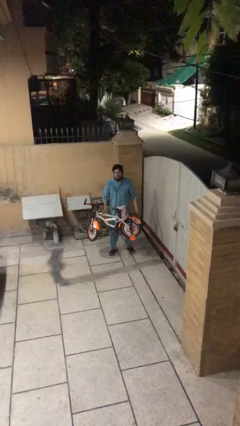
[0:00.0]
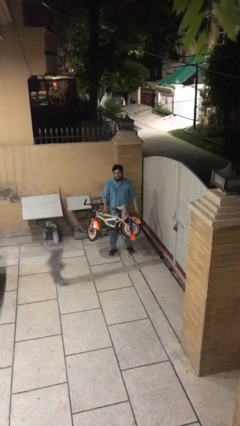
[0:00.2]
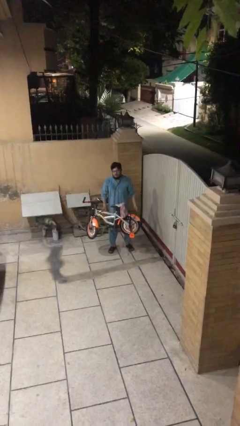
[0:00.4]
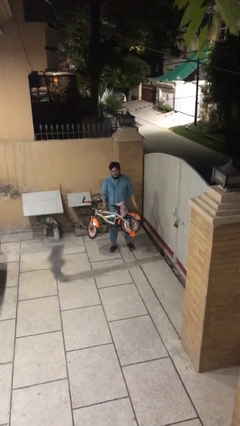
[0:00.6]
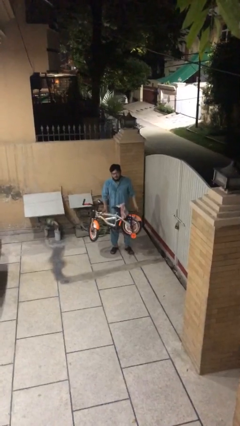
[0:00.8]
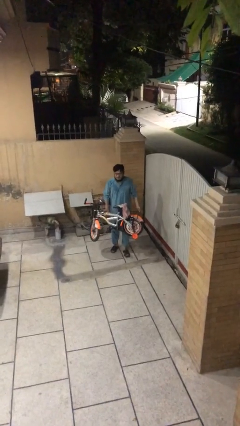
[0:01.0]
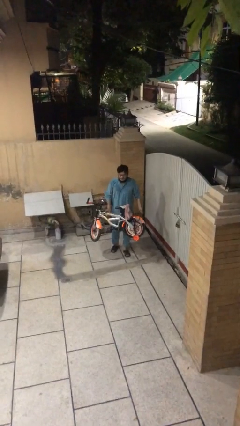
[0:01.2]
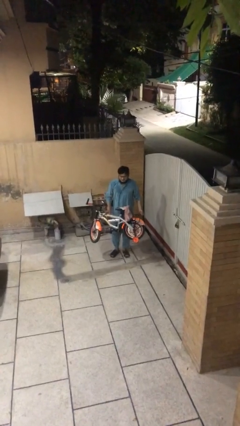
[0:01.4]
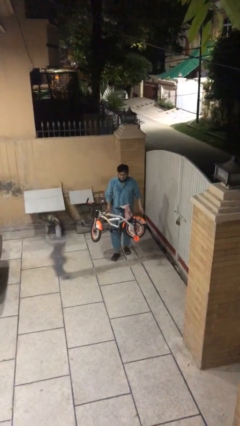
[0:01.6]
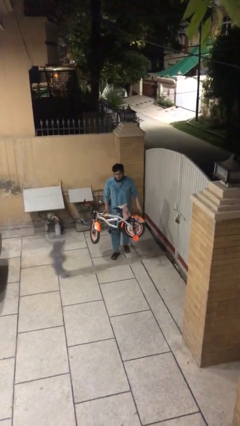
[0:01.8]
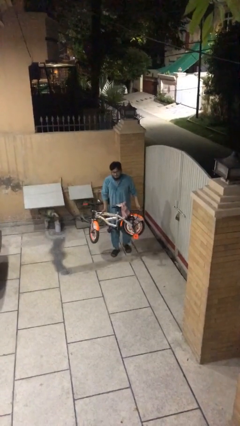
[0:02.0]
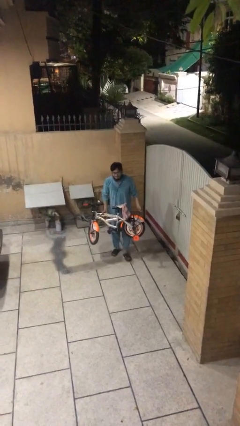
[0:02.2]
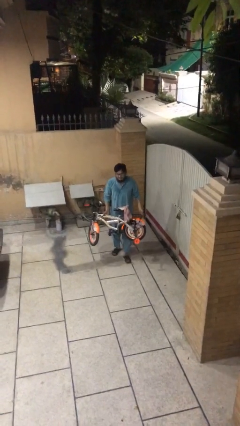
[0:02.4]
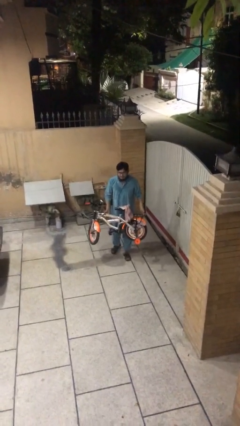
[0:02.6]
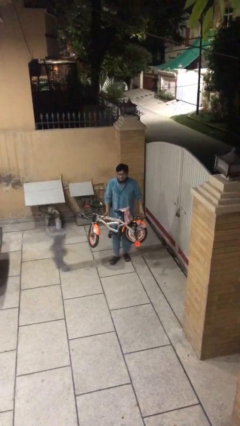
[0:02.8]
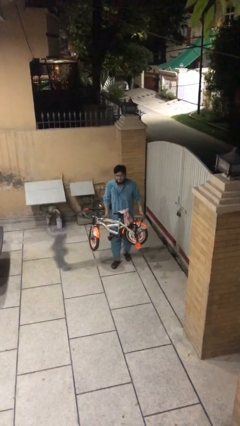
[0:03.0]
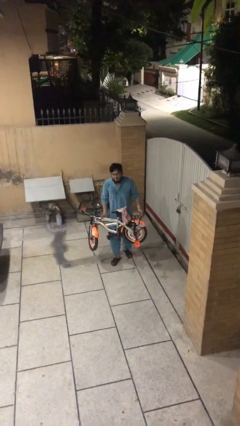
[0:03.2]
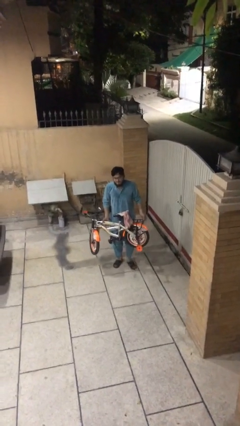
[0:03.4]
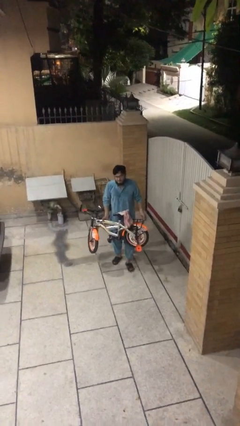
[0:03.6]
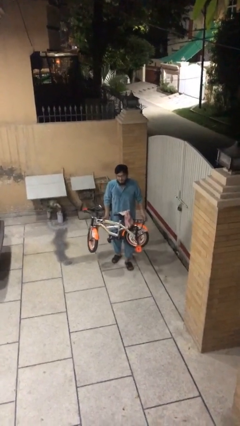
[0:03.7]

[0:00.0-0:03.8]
person carries heavy object

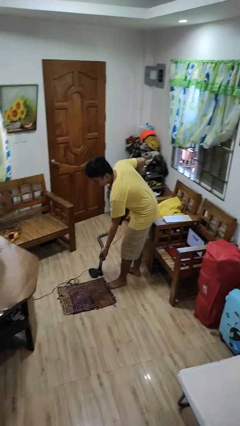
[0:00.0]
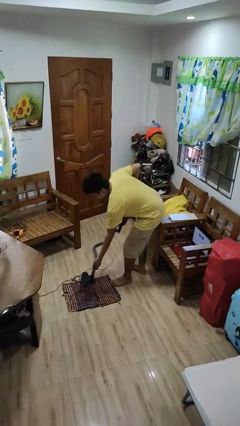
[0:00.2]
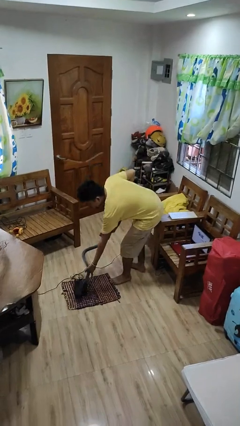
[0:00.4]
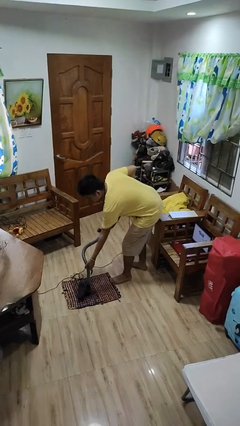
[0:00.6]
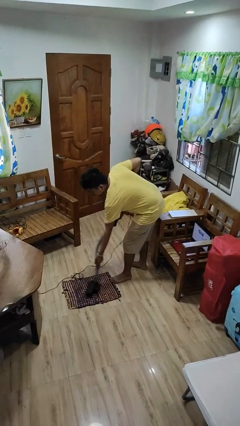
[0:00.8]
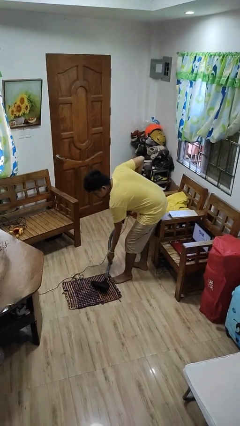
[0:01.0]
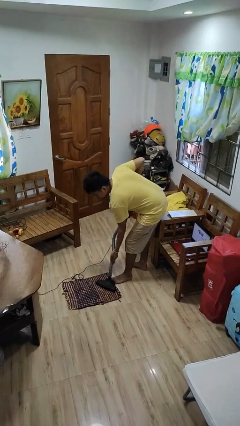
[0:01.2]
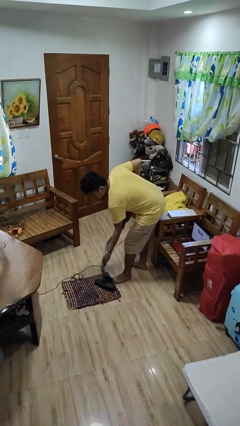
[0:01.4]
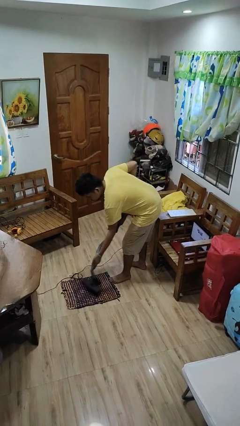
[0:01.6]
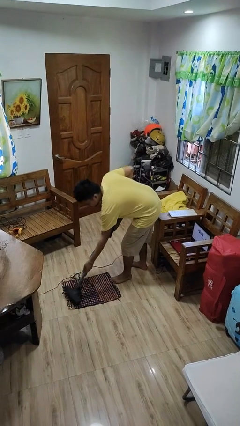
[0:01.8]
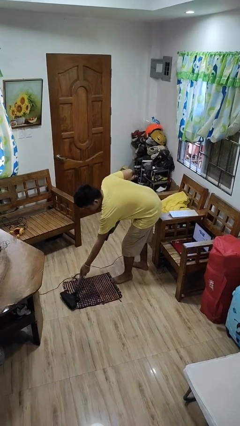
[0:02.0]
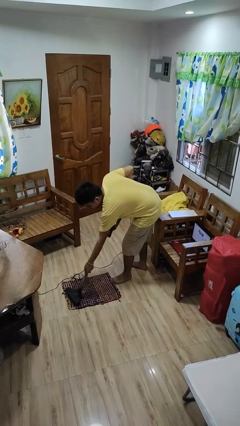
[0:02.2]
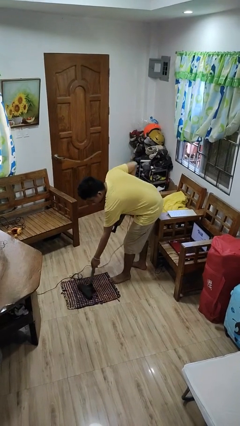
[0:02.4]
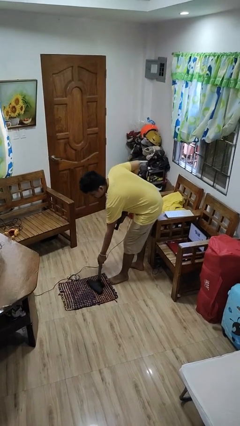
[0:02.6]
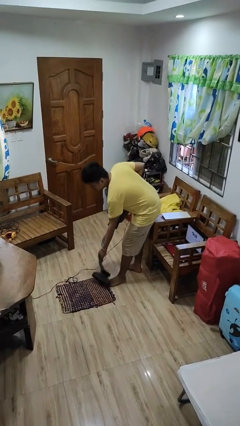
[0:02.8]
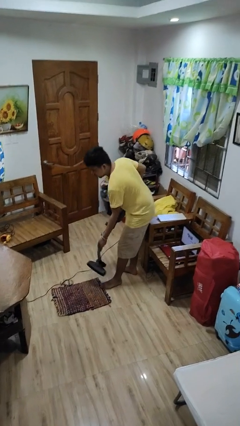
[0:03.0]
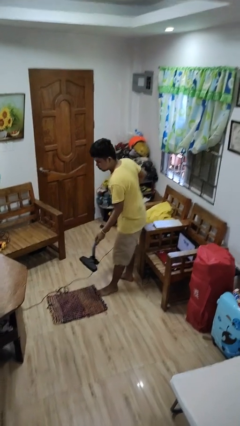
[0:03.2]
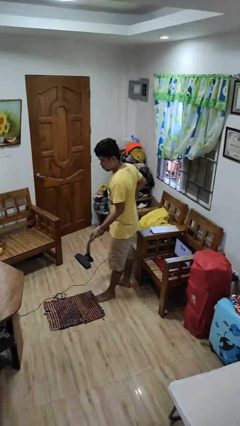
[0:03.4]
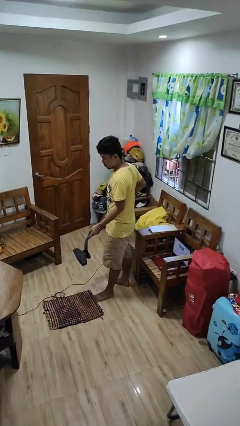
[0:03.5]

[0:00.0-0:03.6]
person vacuums carpet

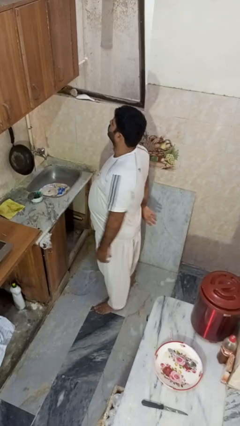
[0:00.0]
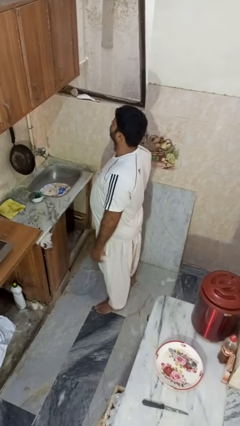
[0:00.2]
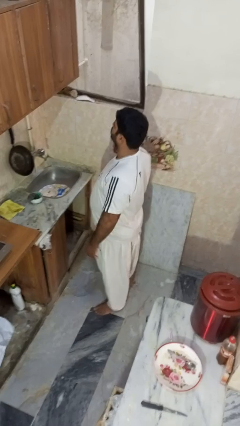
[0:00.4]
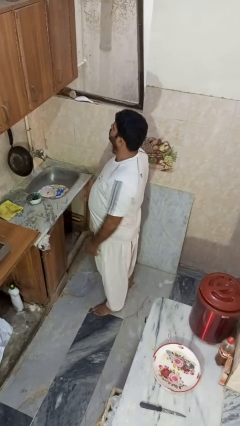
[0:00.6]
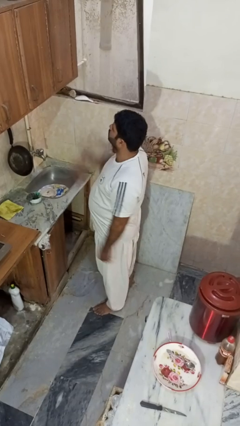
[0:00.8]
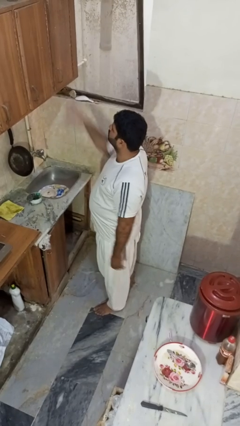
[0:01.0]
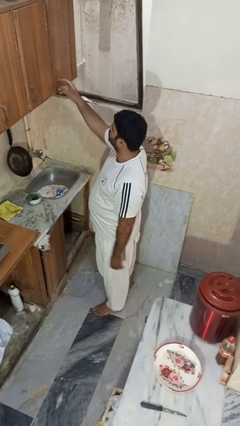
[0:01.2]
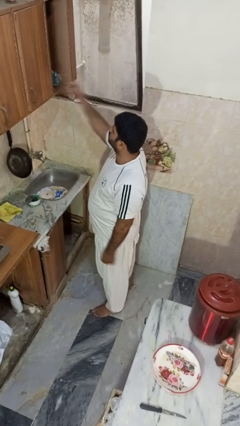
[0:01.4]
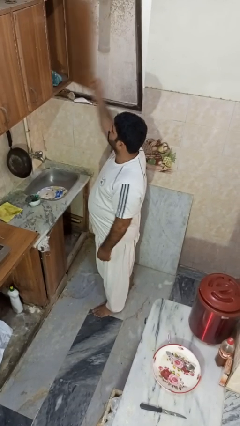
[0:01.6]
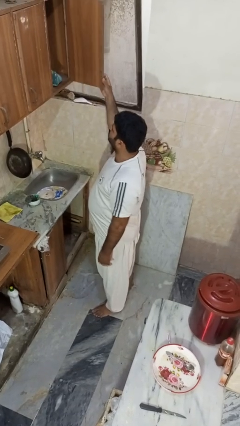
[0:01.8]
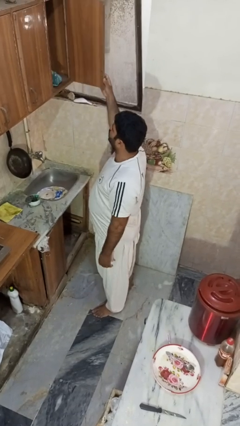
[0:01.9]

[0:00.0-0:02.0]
person opens cabinet

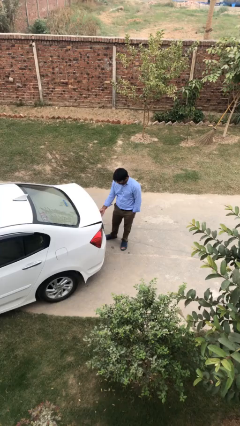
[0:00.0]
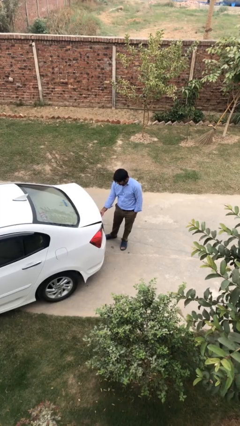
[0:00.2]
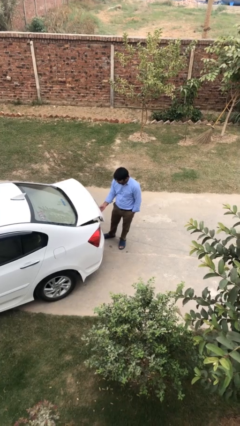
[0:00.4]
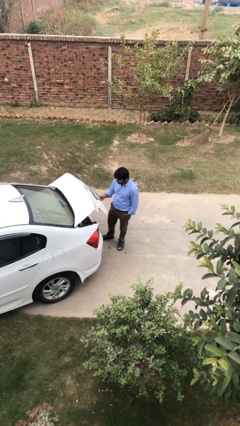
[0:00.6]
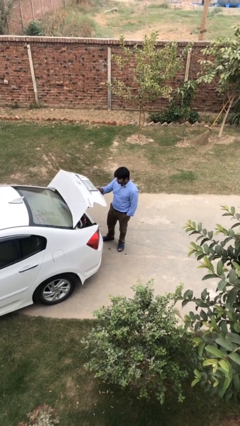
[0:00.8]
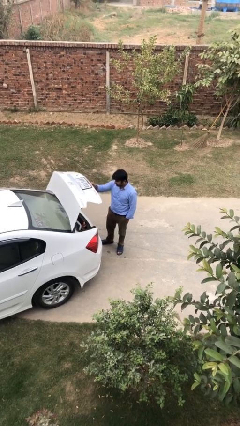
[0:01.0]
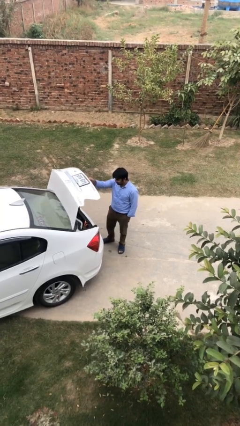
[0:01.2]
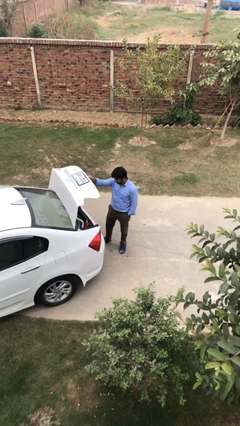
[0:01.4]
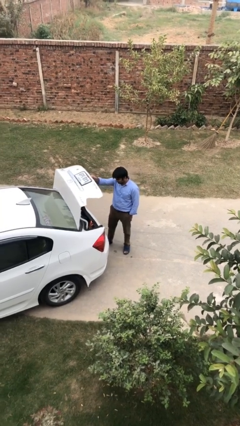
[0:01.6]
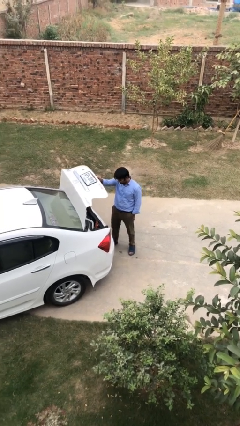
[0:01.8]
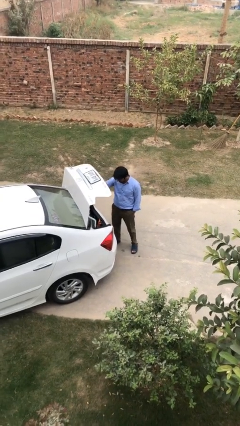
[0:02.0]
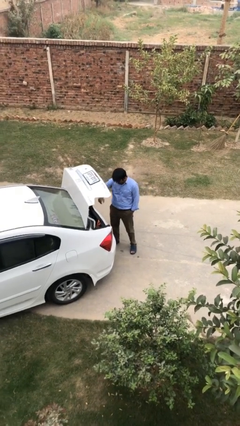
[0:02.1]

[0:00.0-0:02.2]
person opens car trunk

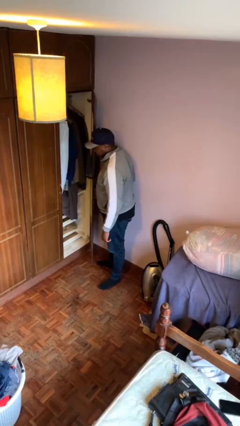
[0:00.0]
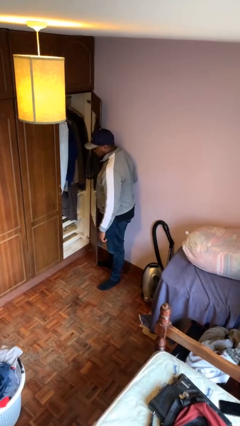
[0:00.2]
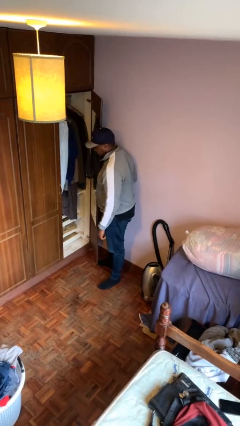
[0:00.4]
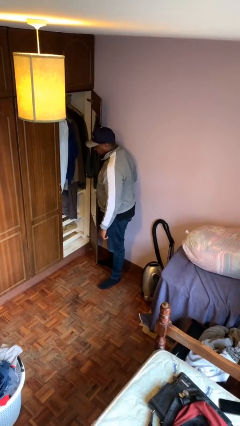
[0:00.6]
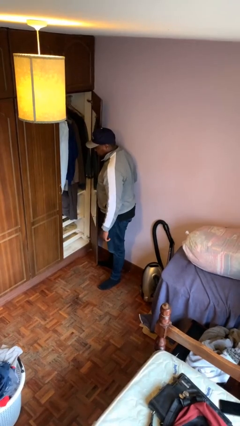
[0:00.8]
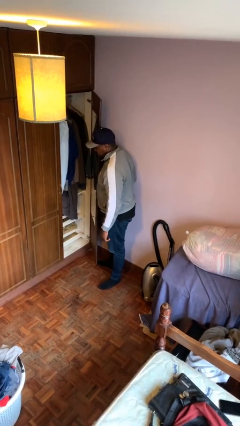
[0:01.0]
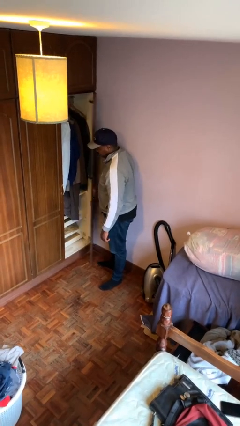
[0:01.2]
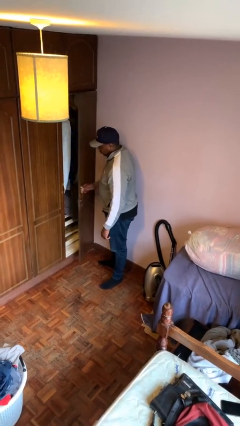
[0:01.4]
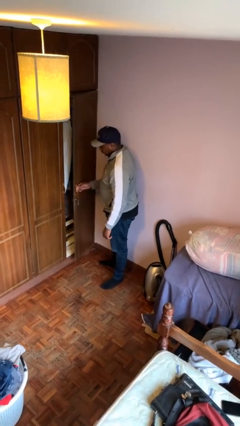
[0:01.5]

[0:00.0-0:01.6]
person opens closet door

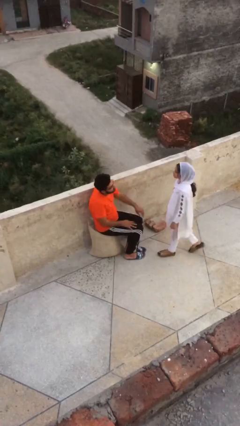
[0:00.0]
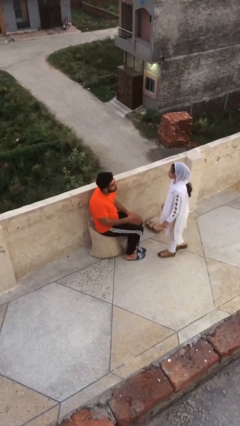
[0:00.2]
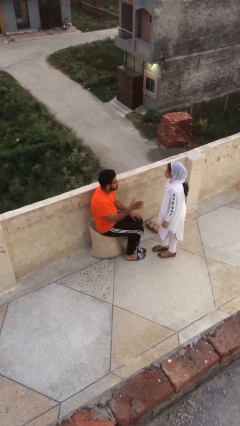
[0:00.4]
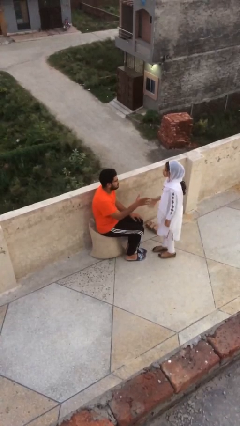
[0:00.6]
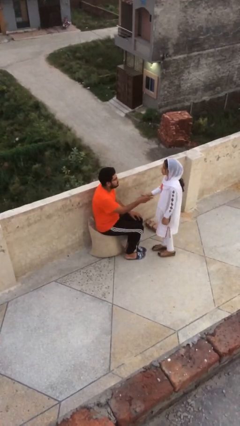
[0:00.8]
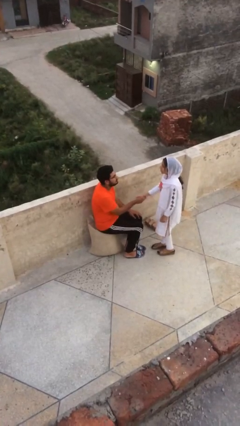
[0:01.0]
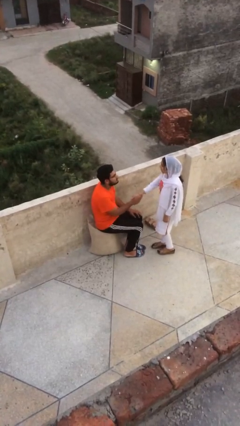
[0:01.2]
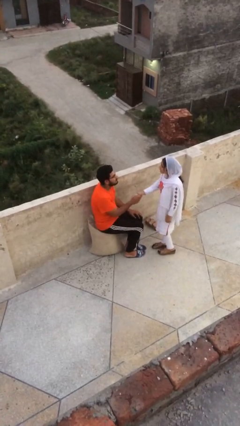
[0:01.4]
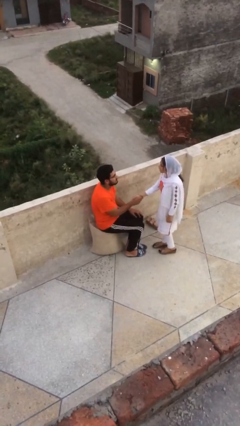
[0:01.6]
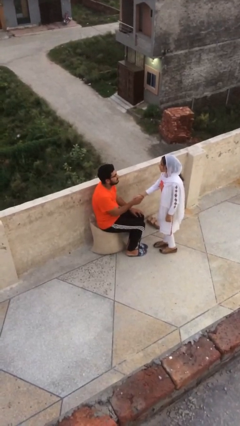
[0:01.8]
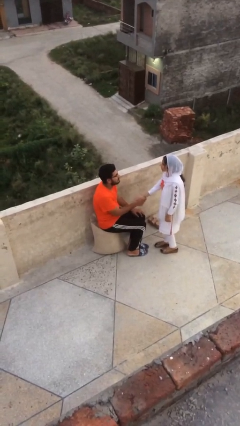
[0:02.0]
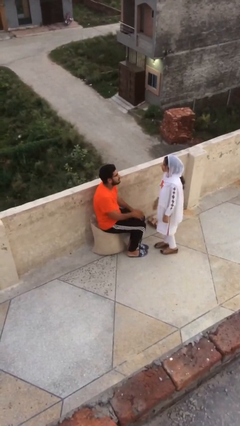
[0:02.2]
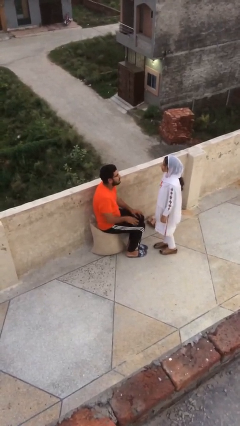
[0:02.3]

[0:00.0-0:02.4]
person shakes hand

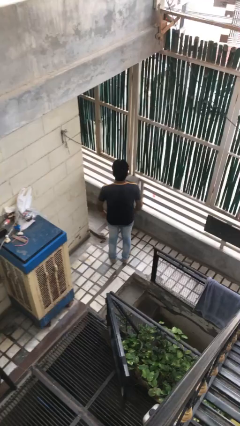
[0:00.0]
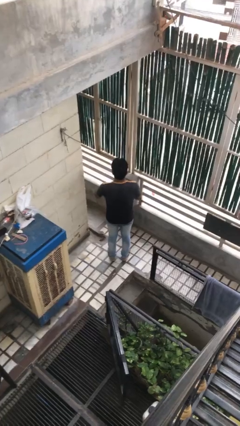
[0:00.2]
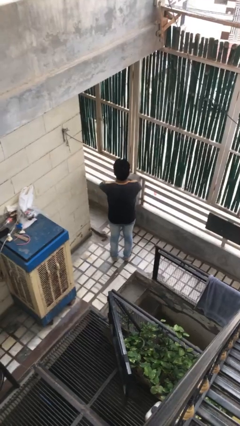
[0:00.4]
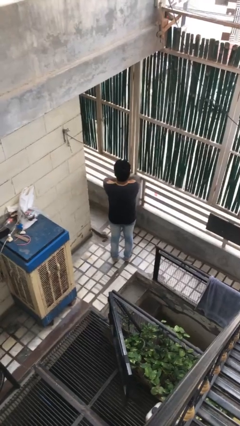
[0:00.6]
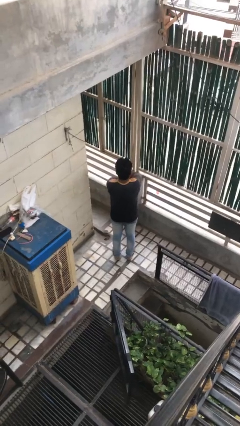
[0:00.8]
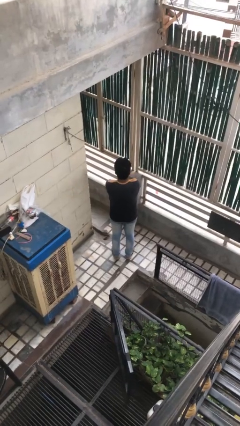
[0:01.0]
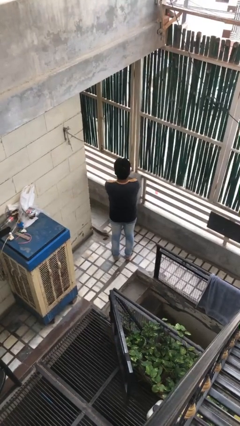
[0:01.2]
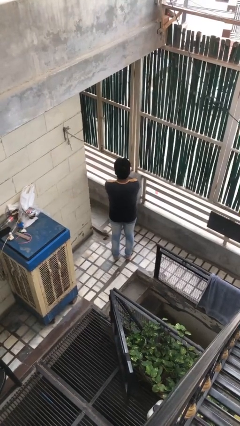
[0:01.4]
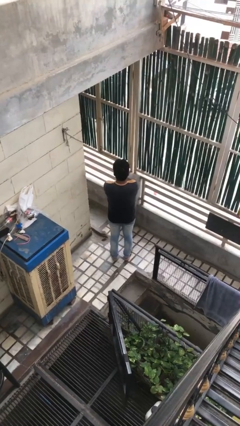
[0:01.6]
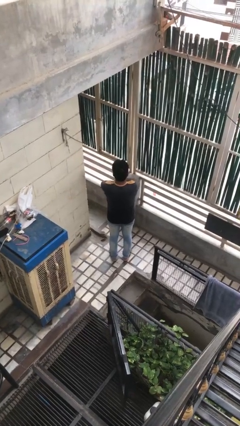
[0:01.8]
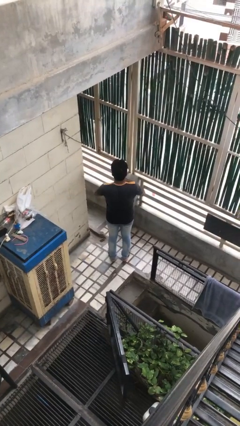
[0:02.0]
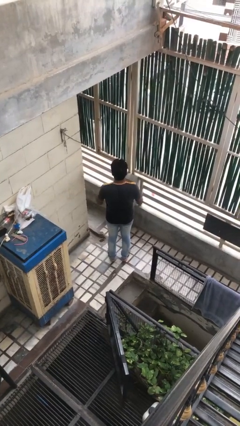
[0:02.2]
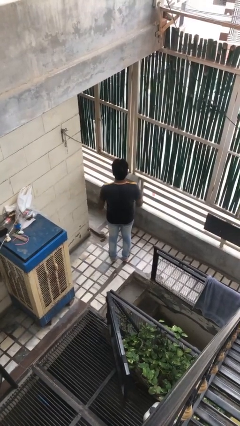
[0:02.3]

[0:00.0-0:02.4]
person crosses arms
